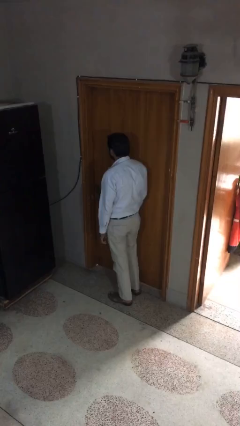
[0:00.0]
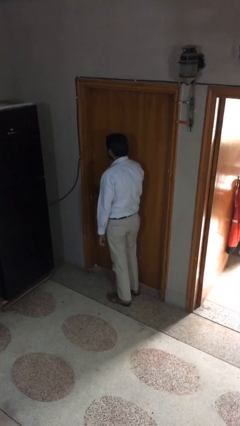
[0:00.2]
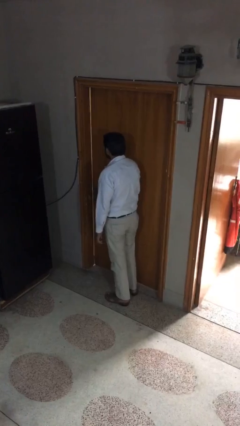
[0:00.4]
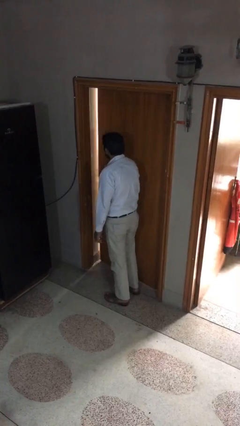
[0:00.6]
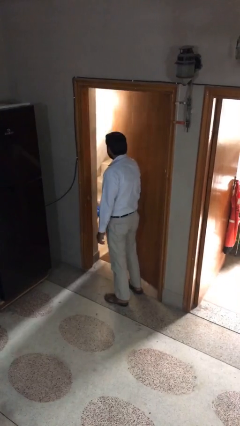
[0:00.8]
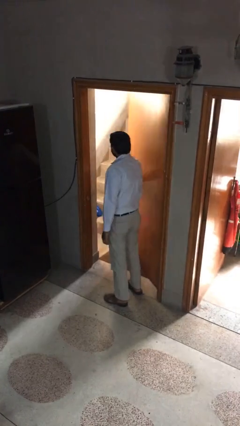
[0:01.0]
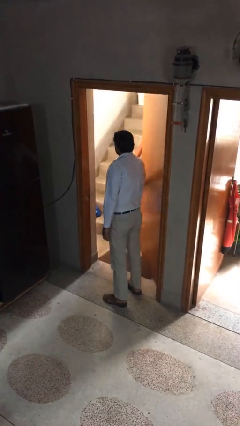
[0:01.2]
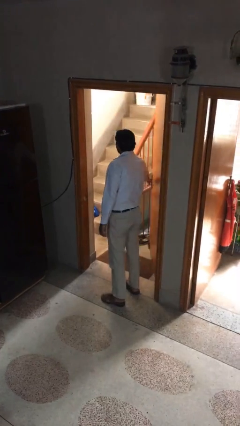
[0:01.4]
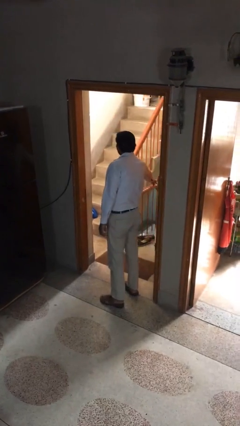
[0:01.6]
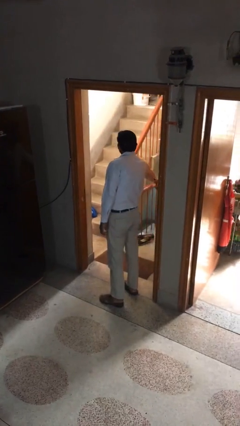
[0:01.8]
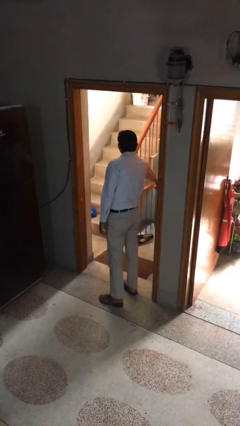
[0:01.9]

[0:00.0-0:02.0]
person opens facility door

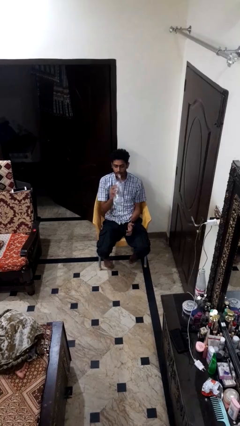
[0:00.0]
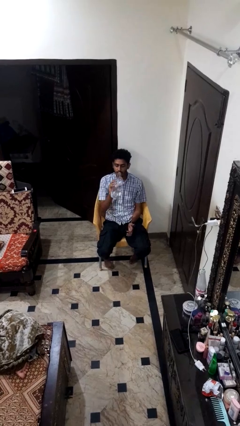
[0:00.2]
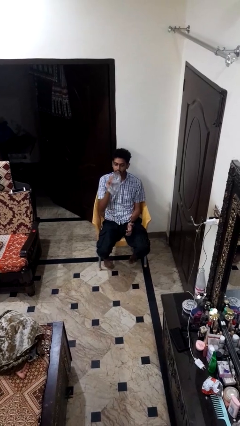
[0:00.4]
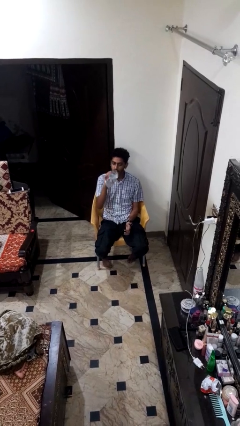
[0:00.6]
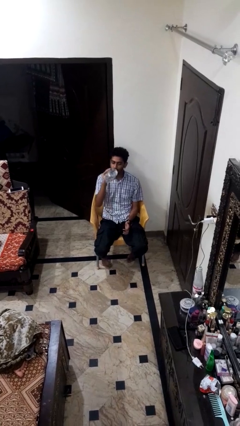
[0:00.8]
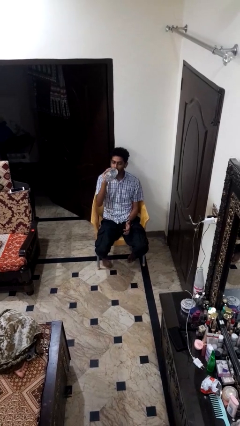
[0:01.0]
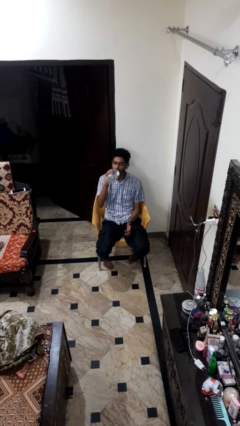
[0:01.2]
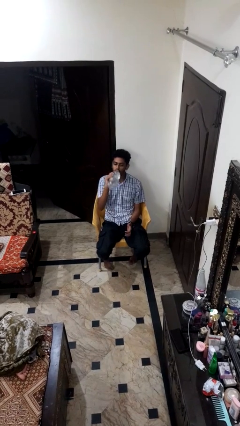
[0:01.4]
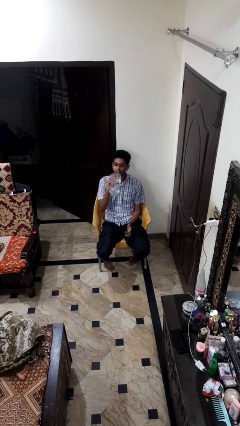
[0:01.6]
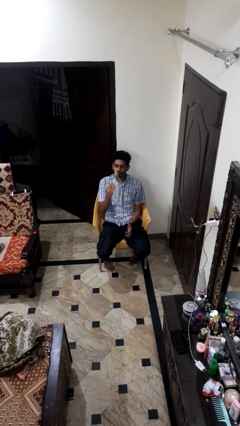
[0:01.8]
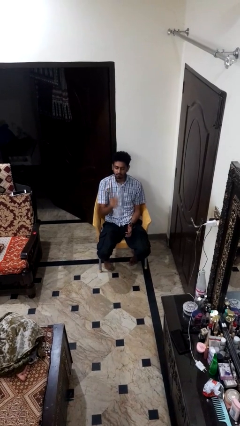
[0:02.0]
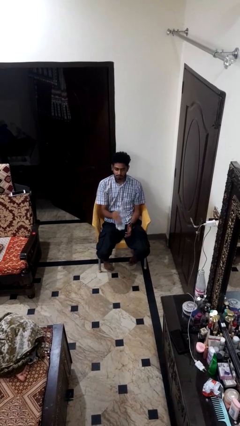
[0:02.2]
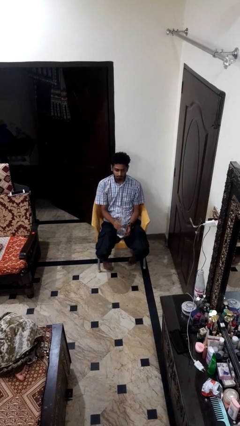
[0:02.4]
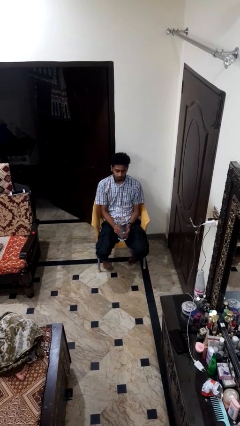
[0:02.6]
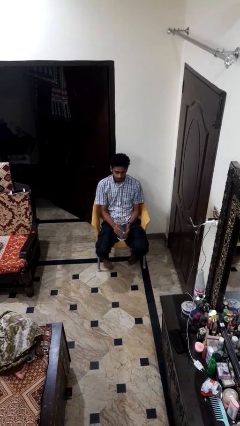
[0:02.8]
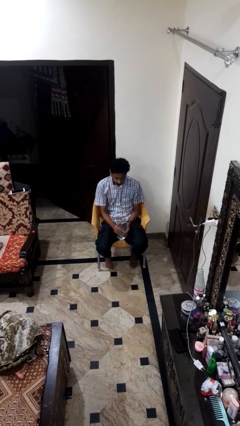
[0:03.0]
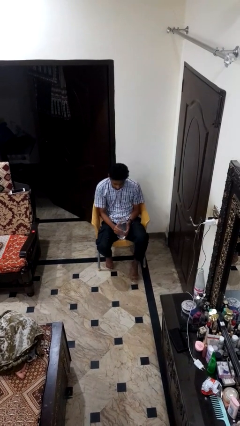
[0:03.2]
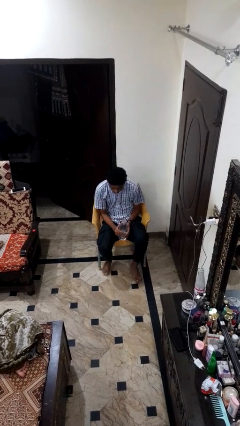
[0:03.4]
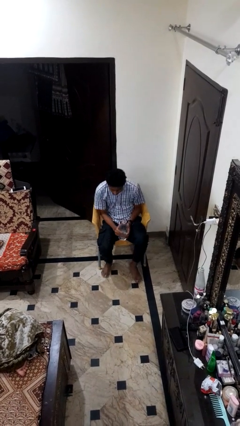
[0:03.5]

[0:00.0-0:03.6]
person drinks from bottle

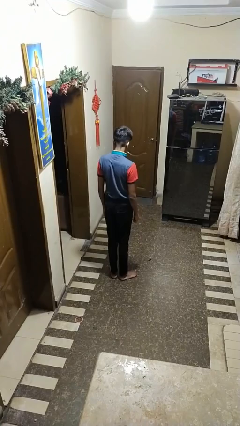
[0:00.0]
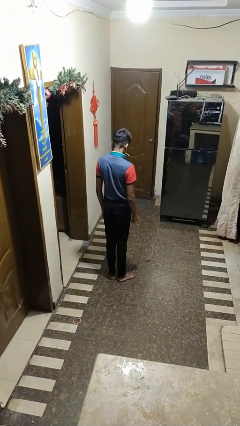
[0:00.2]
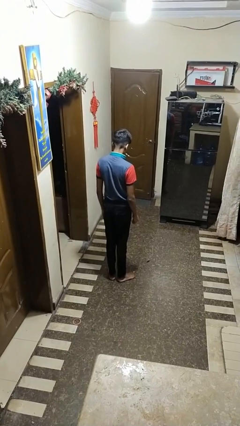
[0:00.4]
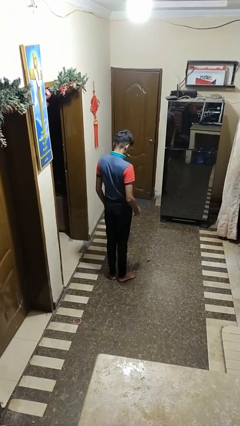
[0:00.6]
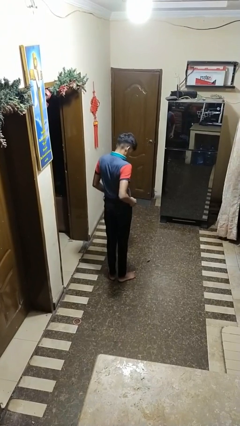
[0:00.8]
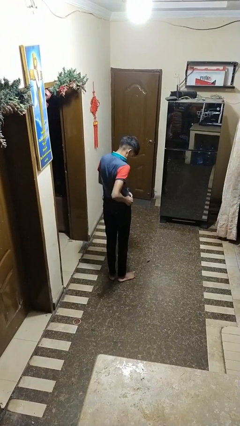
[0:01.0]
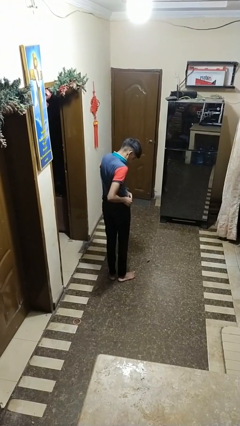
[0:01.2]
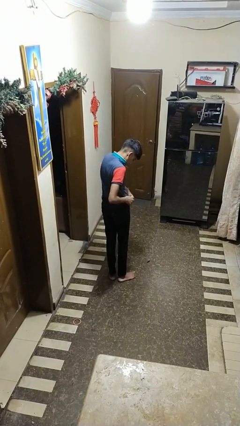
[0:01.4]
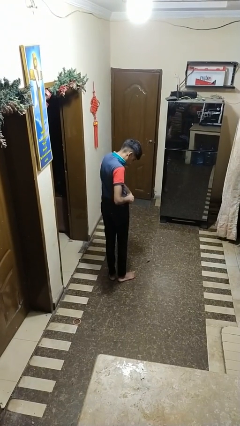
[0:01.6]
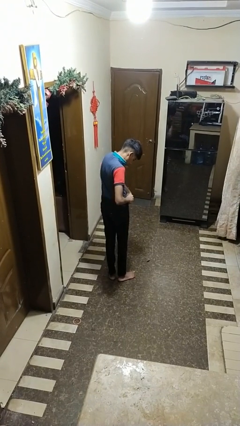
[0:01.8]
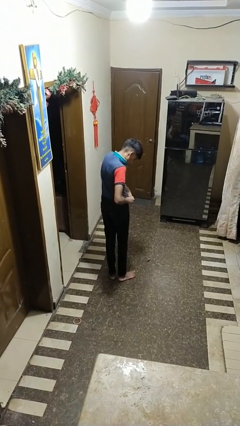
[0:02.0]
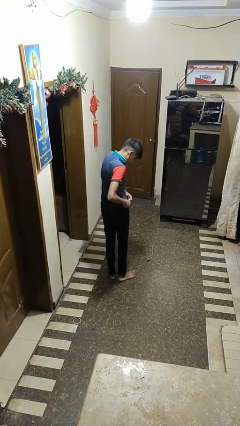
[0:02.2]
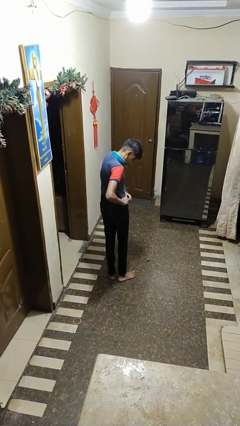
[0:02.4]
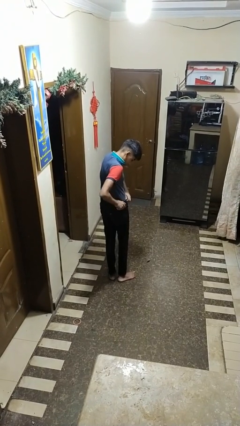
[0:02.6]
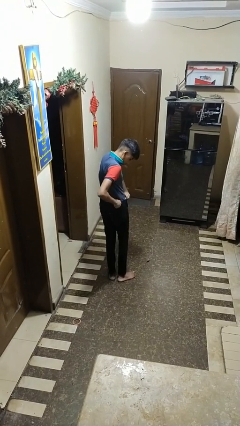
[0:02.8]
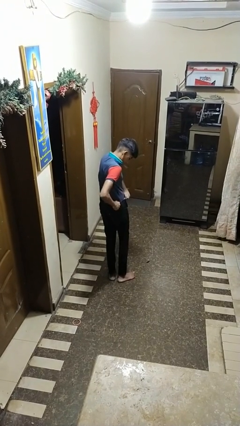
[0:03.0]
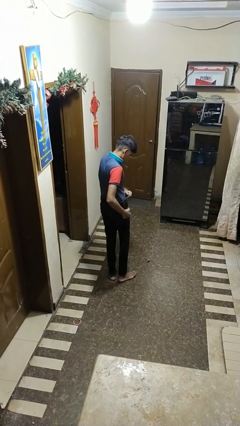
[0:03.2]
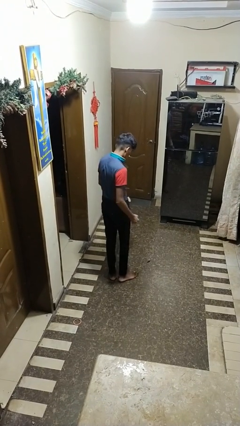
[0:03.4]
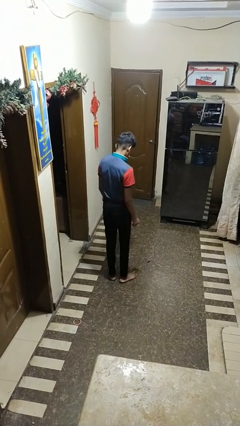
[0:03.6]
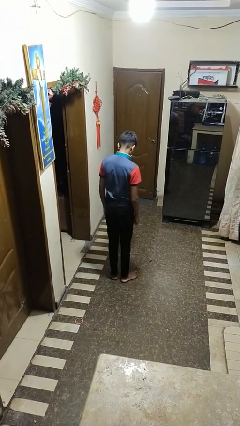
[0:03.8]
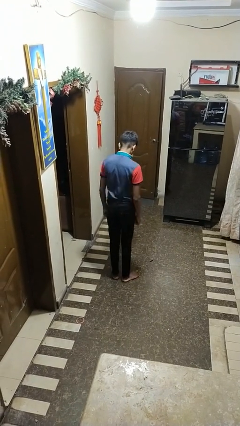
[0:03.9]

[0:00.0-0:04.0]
person hikes up pants

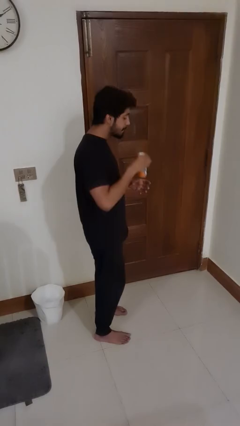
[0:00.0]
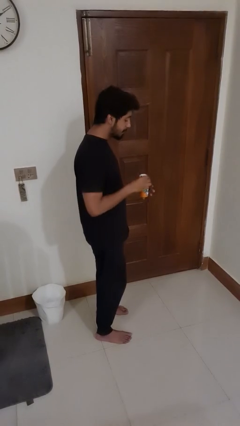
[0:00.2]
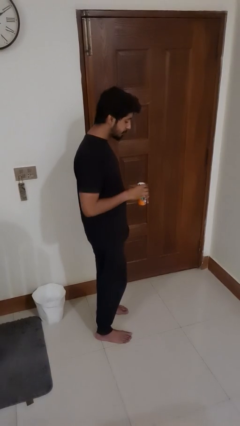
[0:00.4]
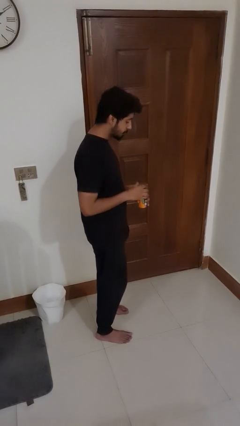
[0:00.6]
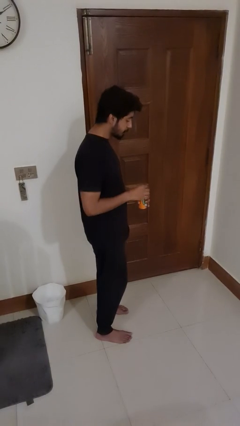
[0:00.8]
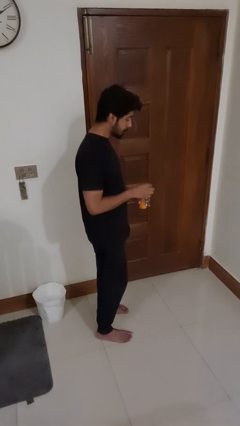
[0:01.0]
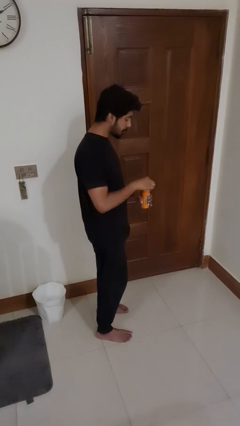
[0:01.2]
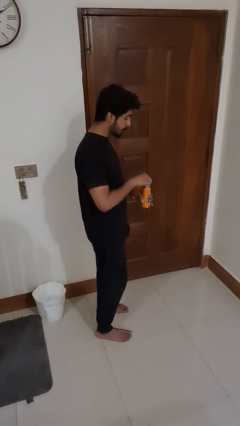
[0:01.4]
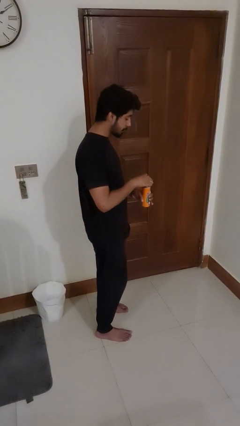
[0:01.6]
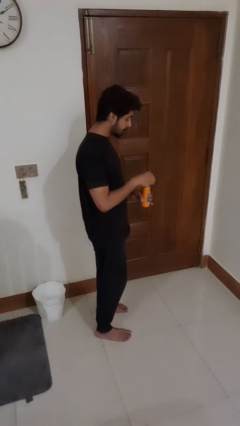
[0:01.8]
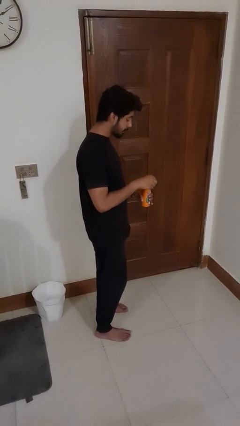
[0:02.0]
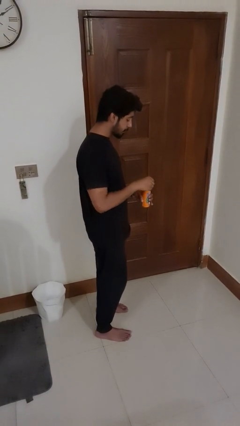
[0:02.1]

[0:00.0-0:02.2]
person opens beverage can

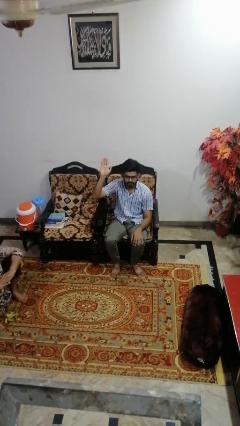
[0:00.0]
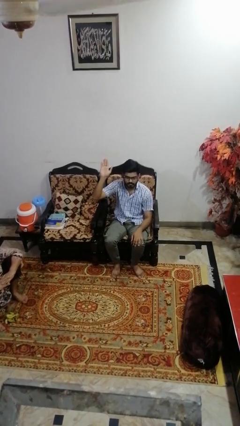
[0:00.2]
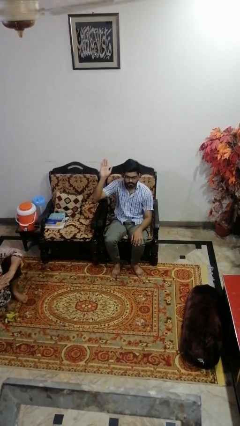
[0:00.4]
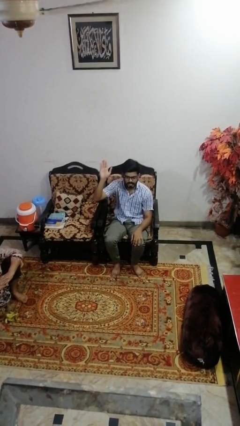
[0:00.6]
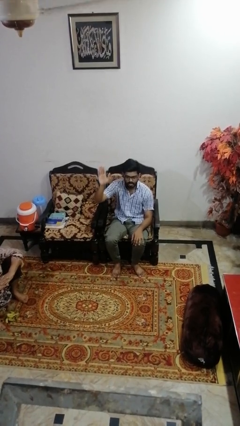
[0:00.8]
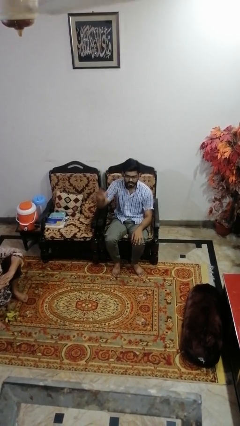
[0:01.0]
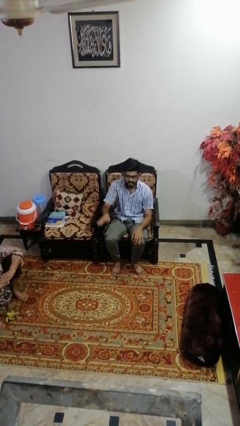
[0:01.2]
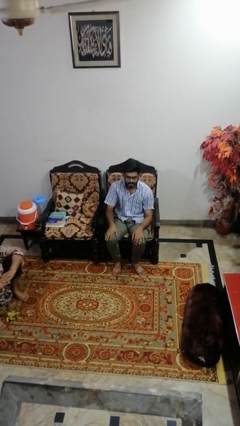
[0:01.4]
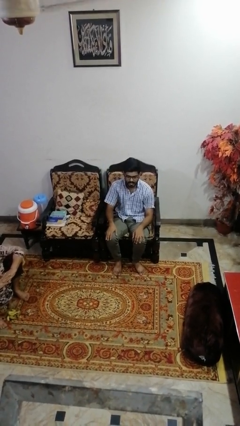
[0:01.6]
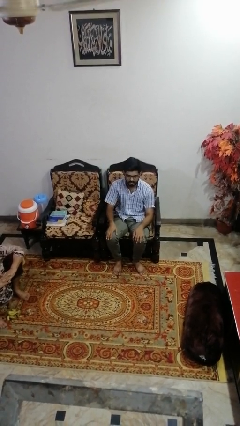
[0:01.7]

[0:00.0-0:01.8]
person gestures lower hand

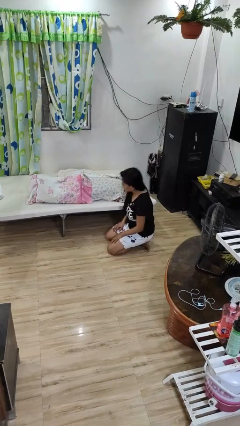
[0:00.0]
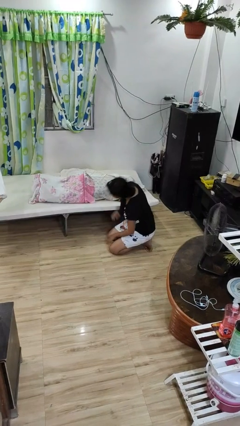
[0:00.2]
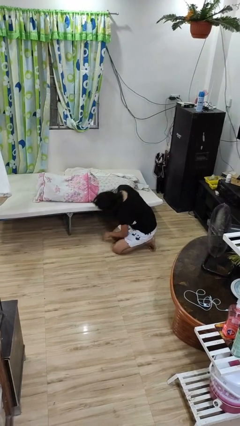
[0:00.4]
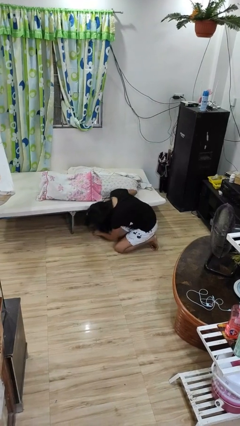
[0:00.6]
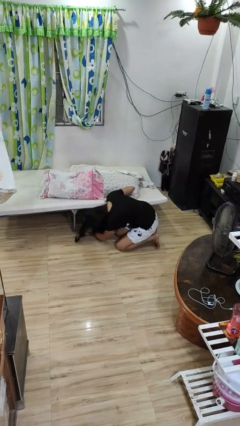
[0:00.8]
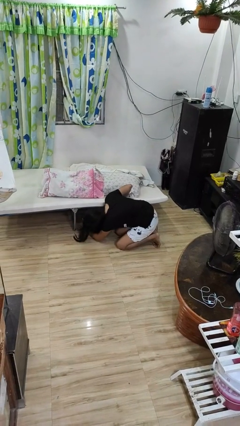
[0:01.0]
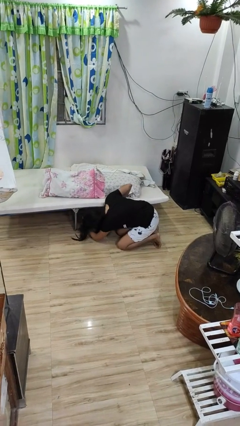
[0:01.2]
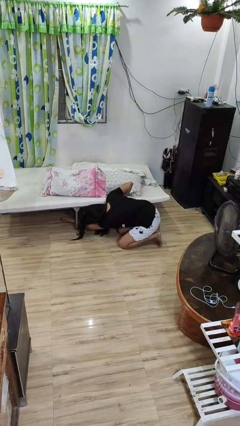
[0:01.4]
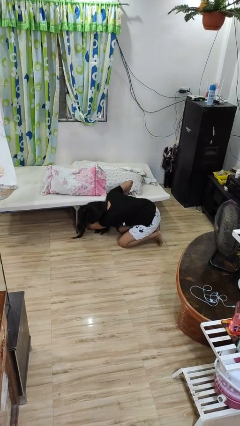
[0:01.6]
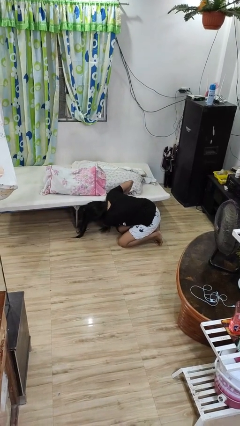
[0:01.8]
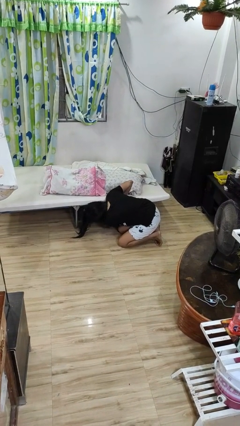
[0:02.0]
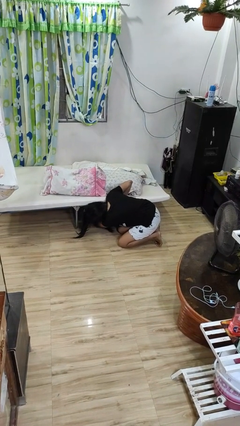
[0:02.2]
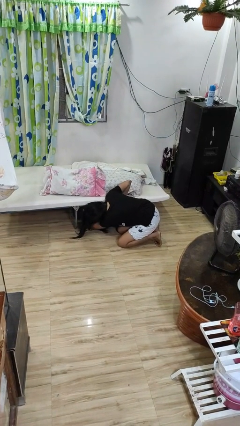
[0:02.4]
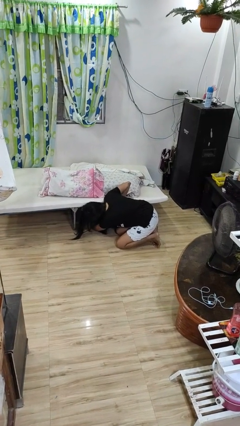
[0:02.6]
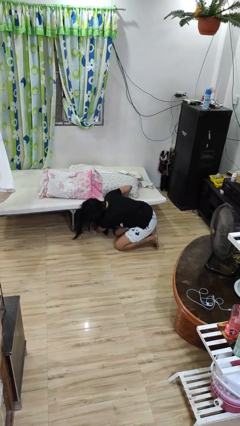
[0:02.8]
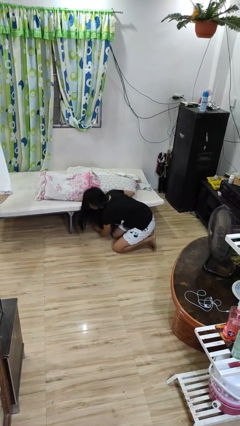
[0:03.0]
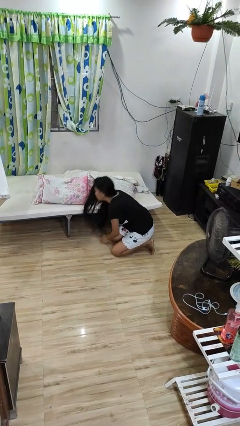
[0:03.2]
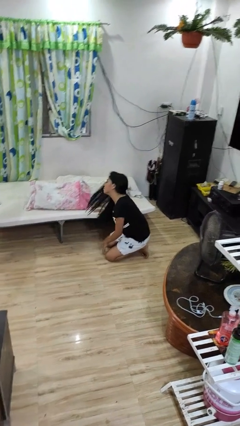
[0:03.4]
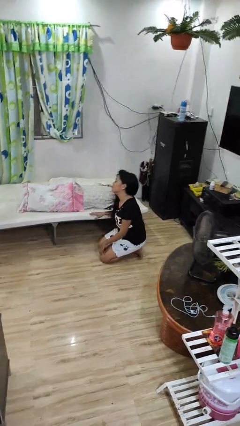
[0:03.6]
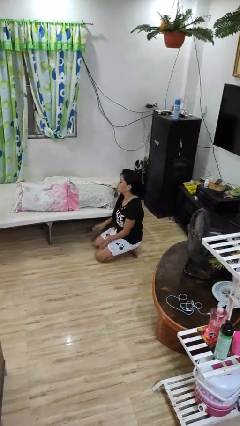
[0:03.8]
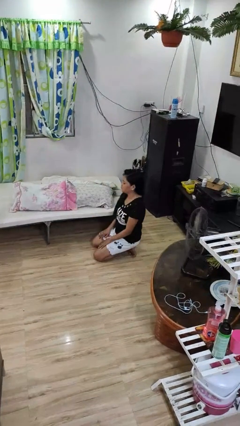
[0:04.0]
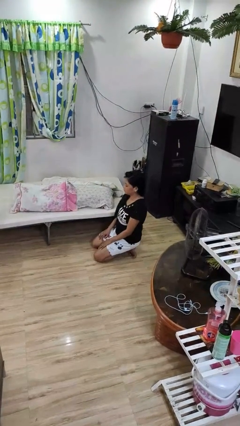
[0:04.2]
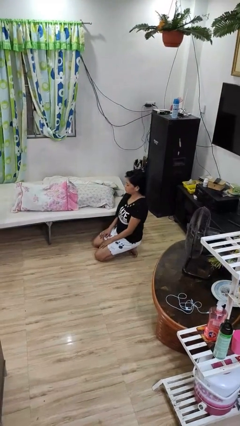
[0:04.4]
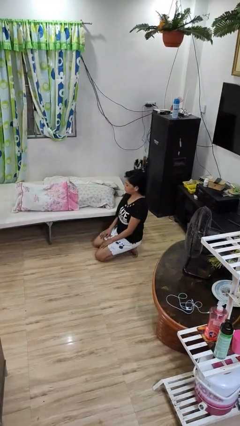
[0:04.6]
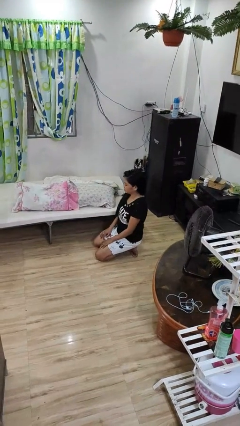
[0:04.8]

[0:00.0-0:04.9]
person searches under bed
